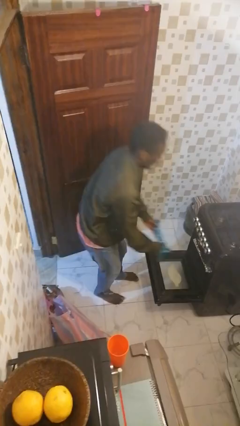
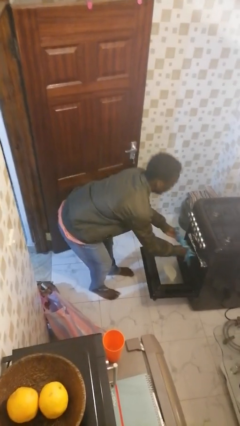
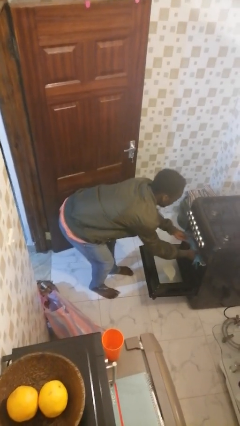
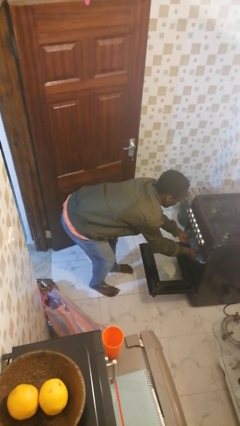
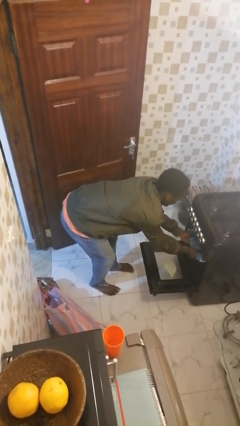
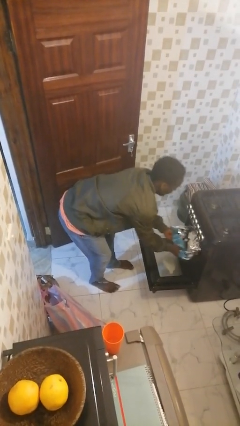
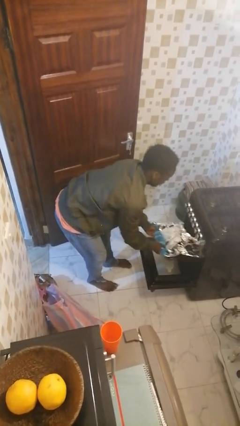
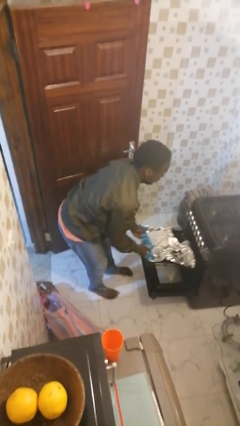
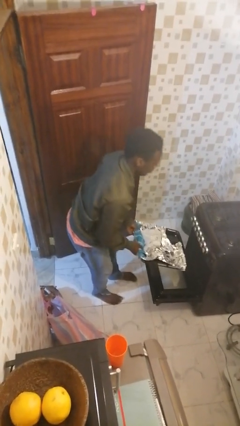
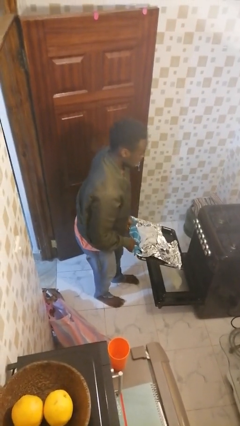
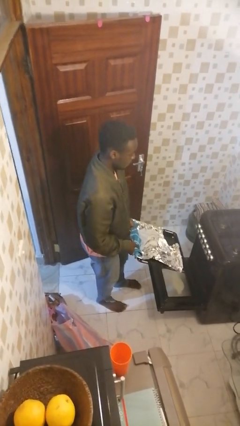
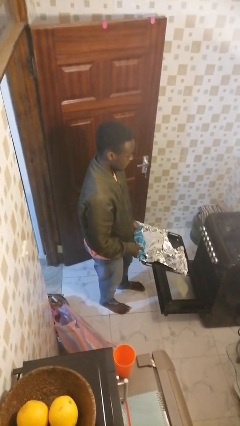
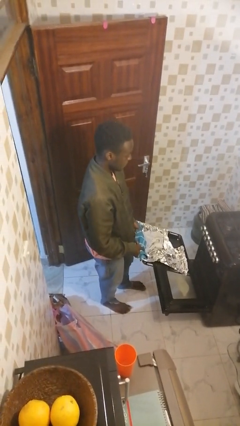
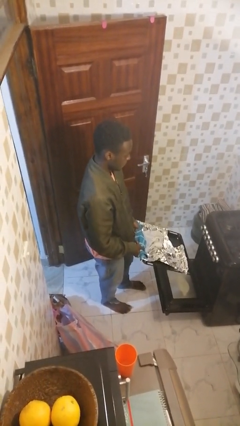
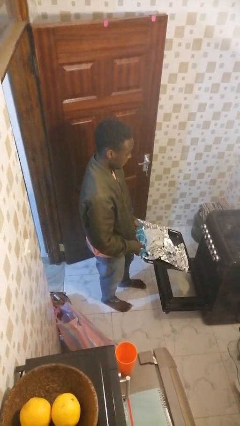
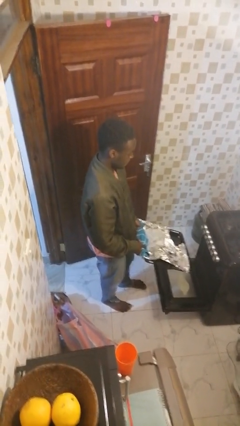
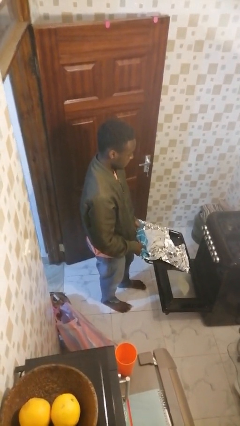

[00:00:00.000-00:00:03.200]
person takes object from oven

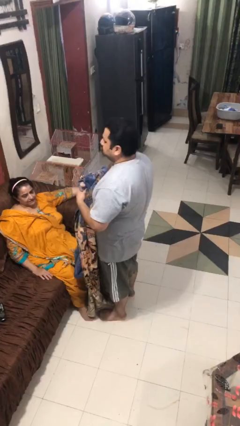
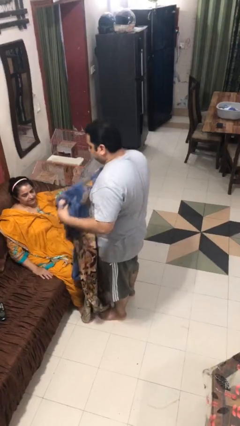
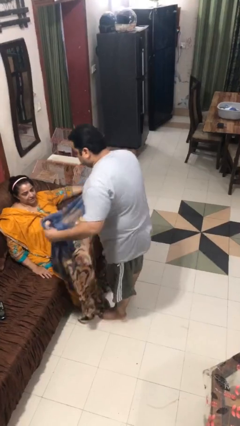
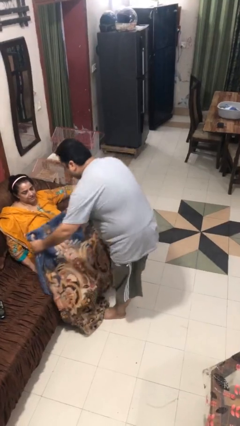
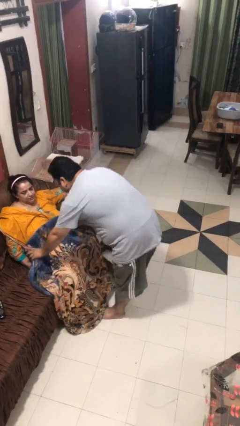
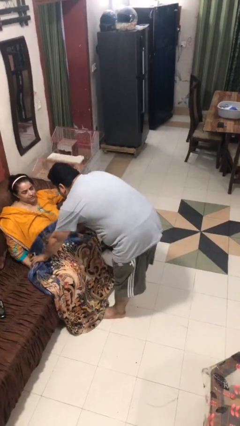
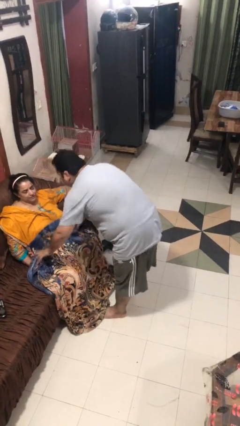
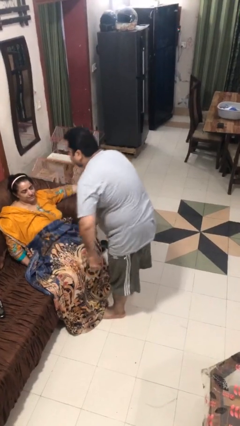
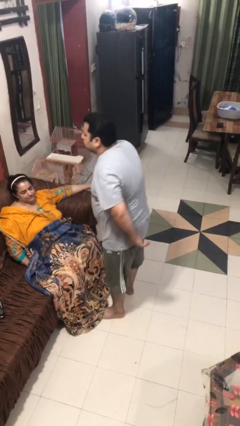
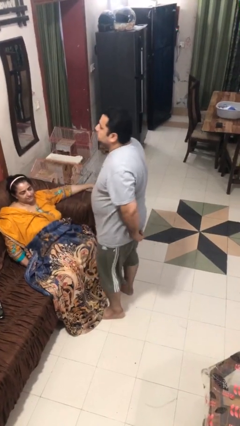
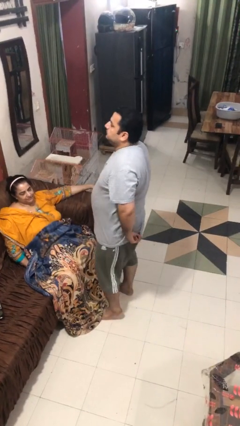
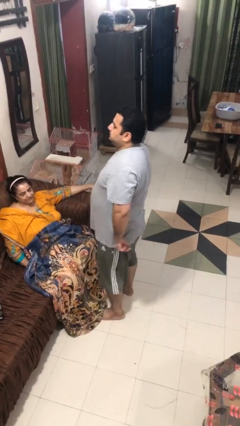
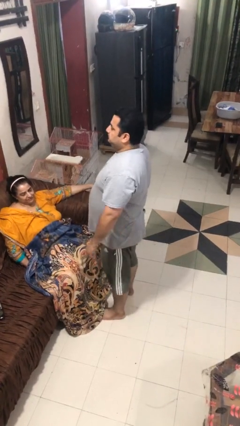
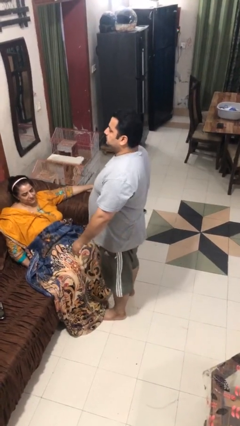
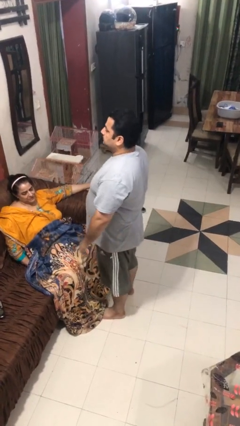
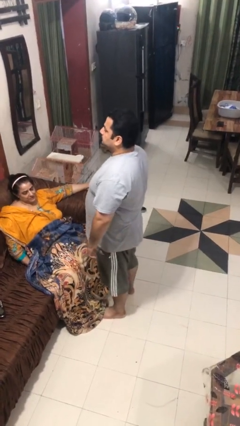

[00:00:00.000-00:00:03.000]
person covers friend with blanket

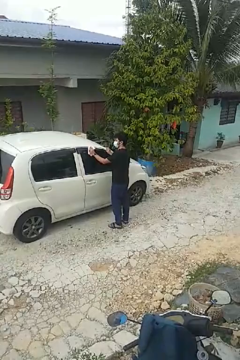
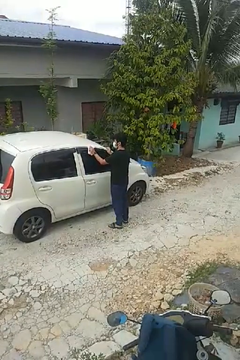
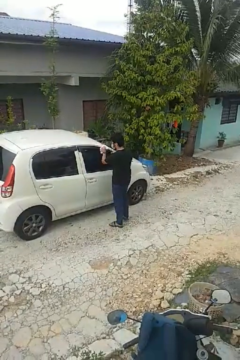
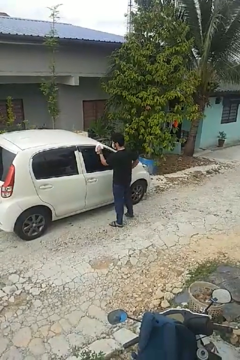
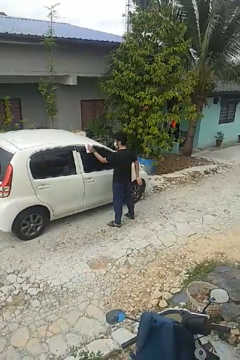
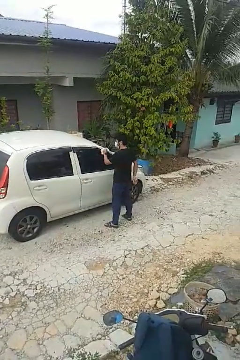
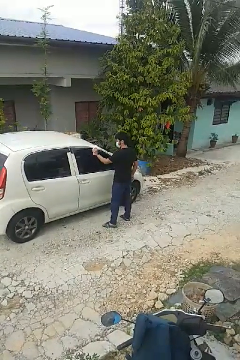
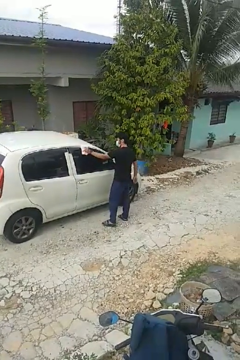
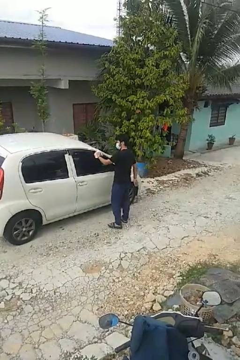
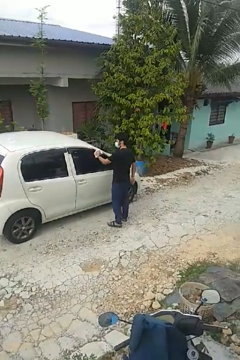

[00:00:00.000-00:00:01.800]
person polishes car with rag

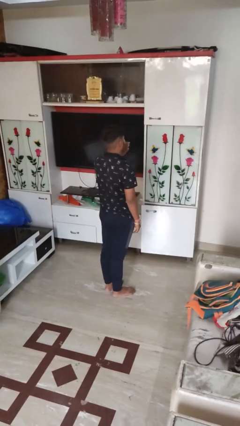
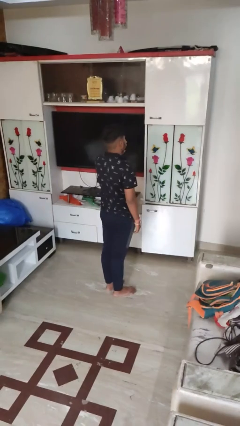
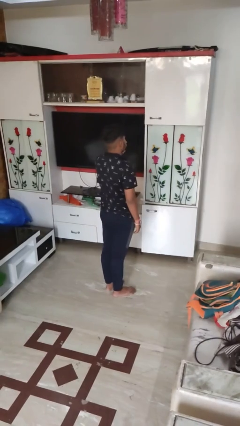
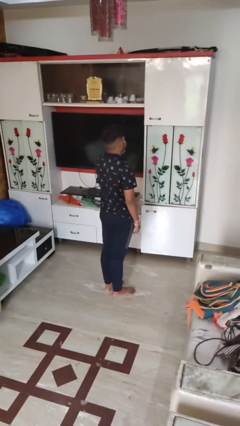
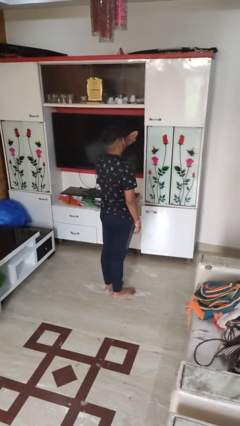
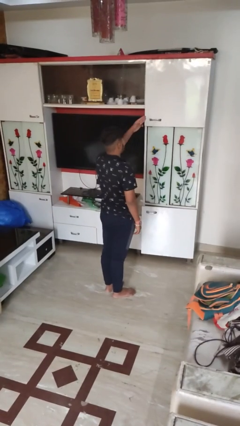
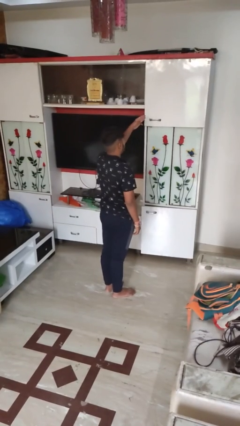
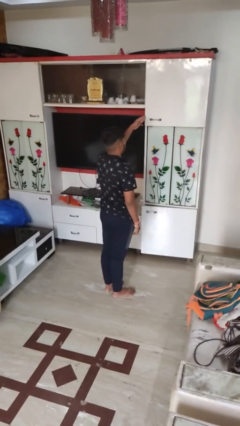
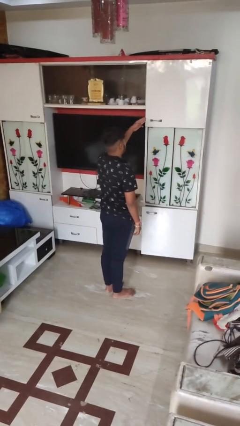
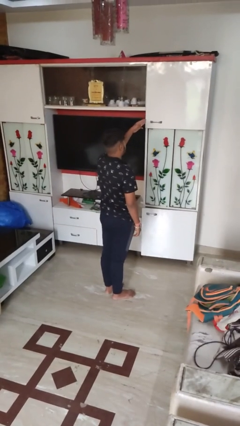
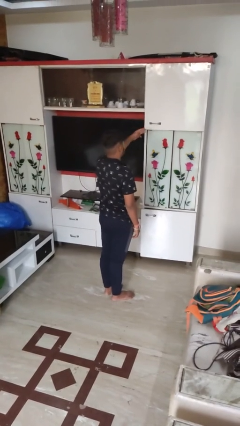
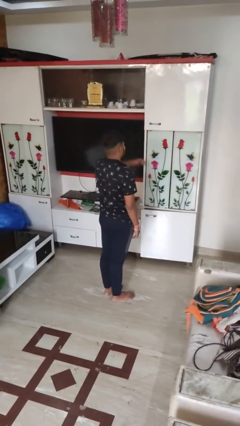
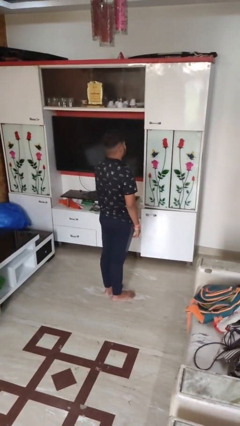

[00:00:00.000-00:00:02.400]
person gestures blow kiss

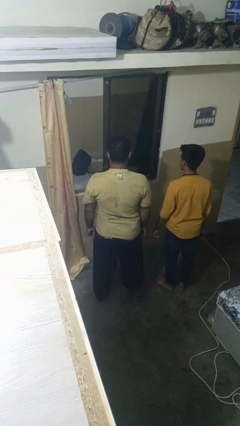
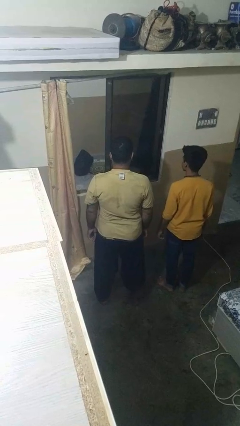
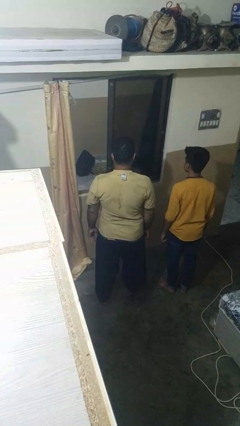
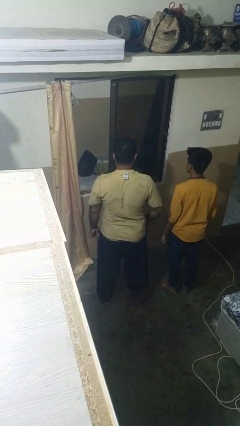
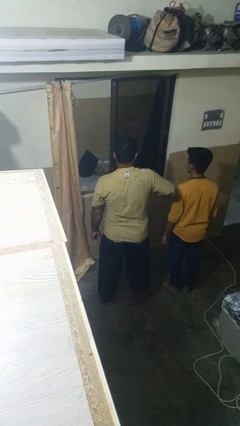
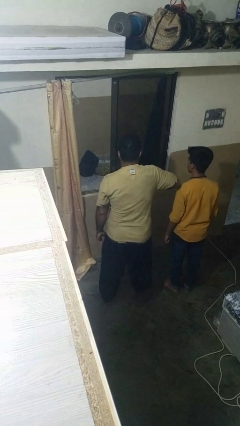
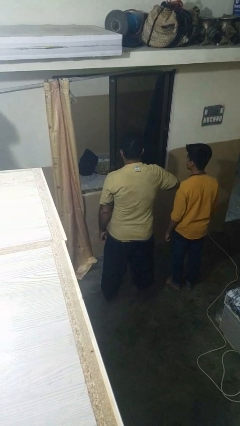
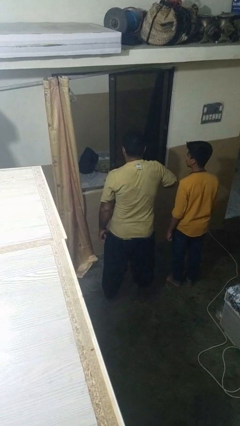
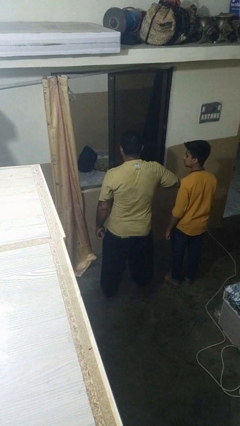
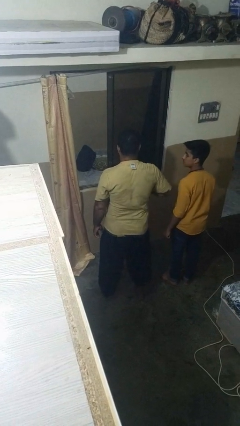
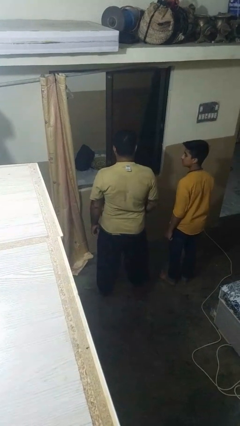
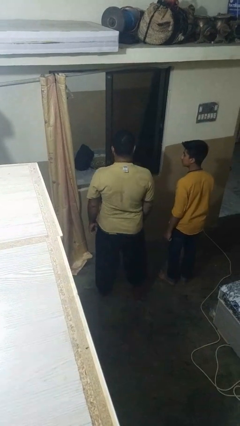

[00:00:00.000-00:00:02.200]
person nudges person with elbow

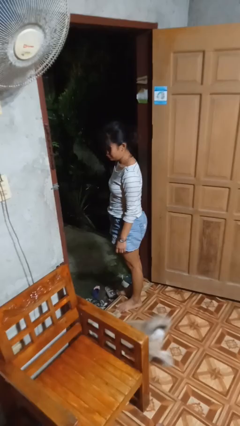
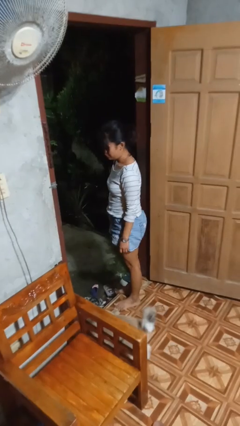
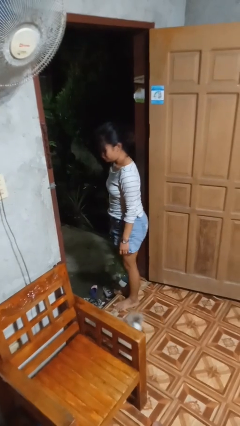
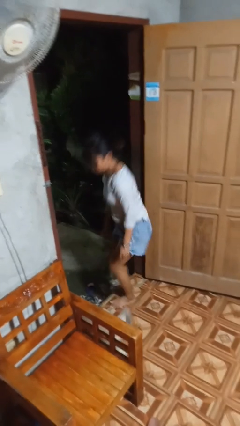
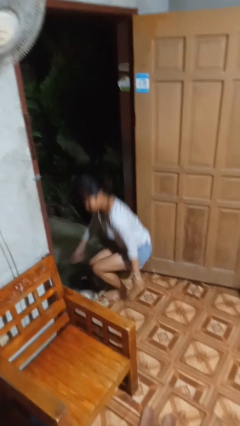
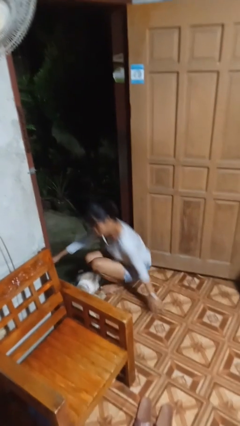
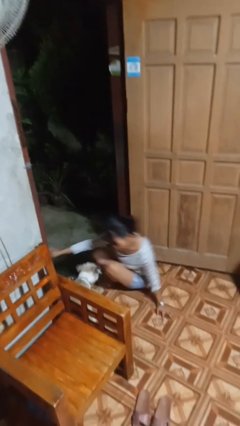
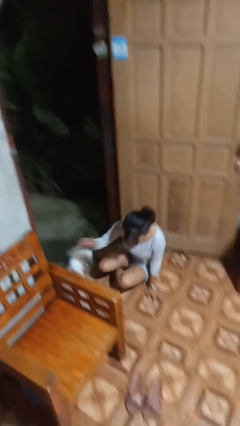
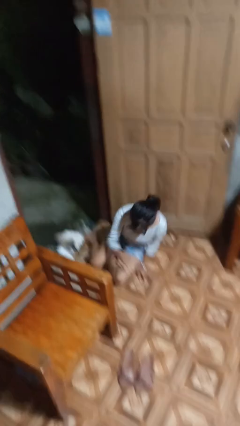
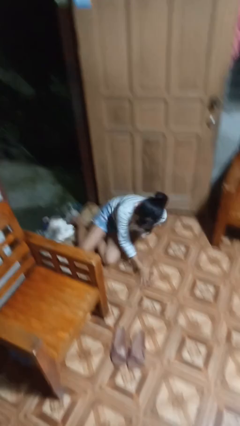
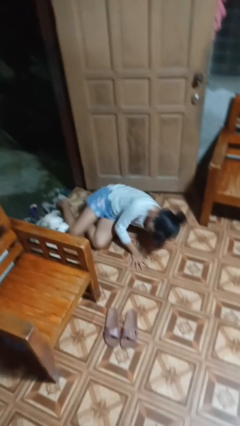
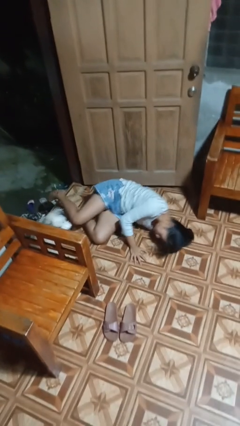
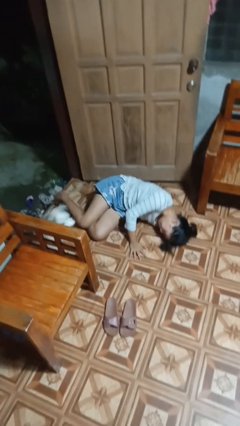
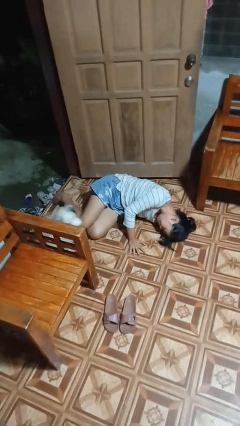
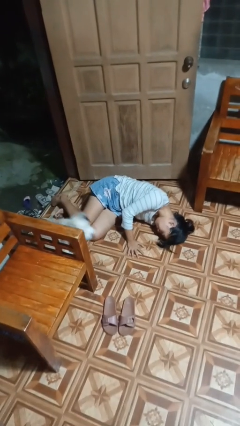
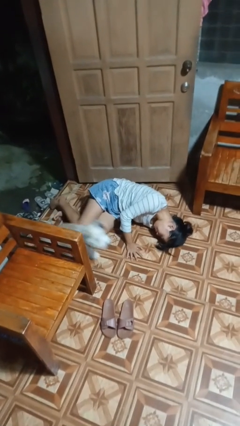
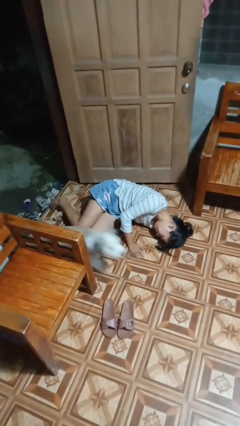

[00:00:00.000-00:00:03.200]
person falls while standing

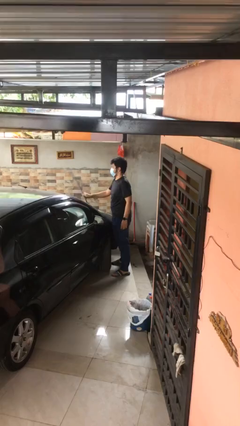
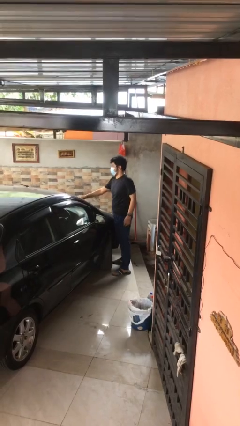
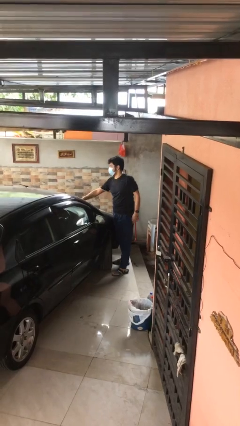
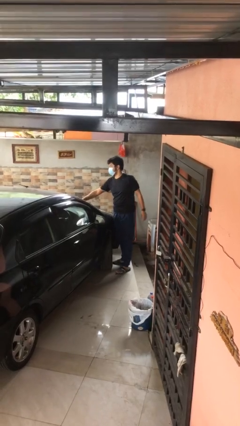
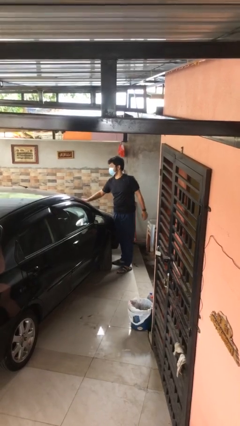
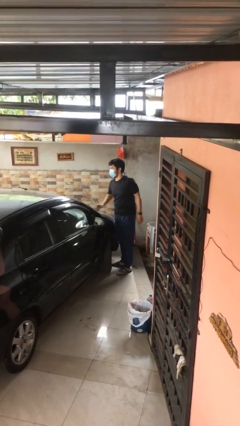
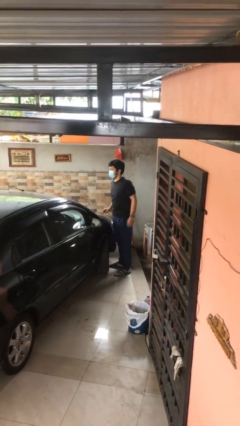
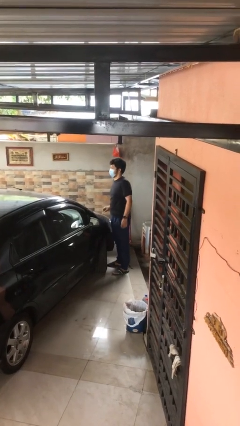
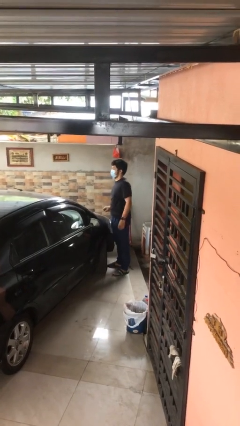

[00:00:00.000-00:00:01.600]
person flips down car wipers

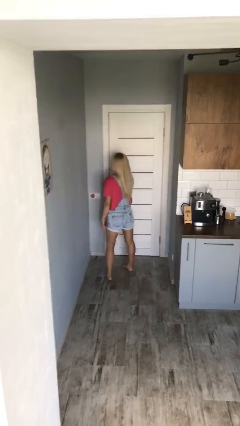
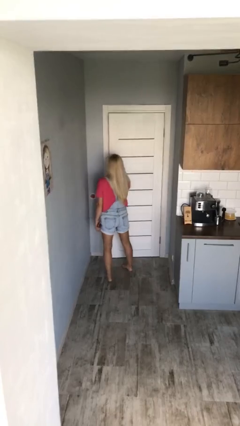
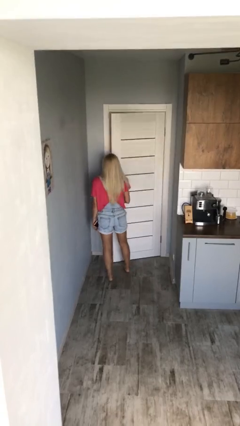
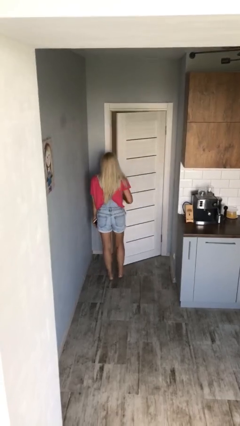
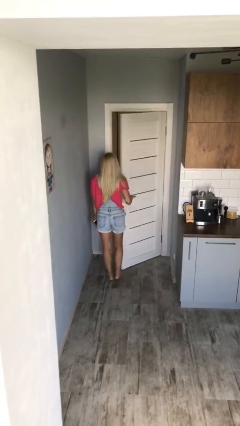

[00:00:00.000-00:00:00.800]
person opens facility door
